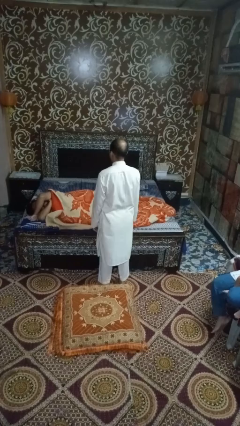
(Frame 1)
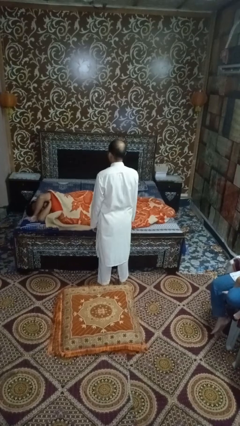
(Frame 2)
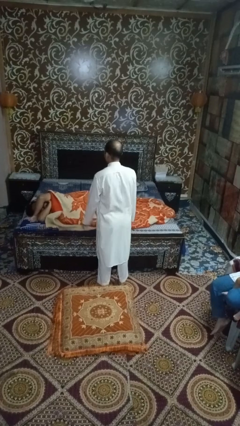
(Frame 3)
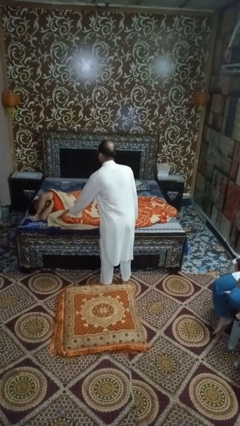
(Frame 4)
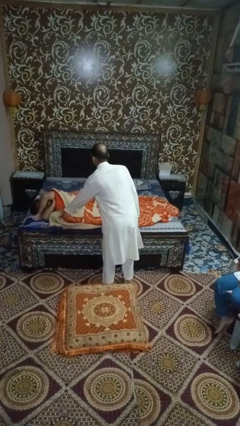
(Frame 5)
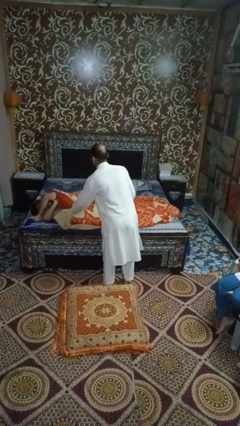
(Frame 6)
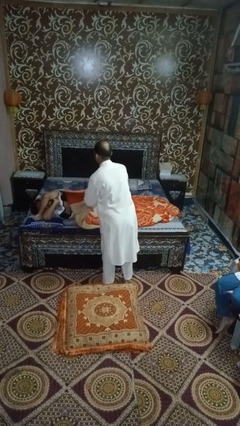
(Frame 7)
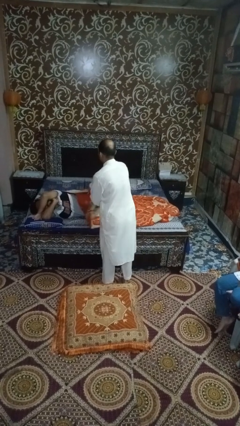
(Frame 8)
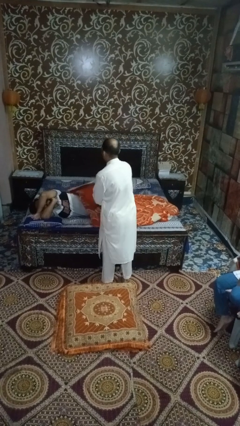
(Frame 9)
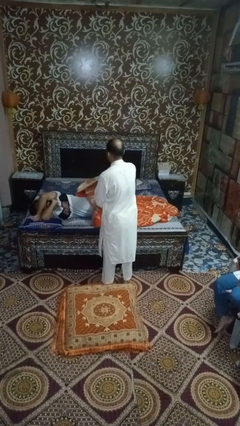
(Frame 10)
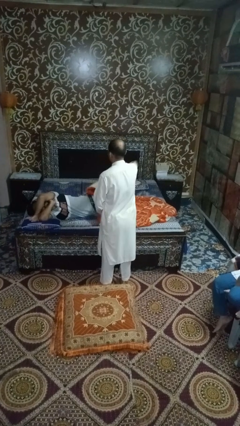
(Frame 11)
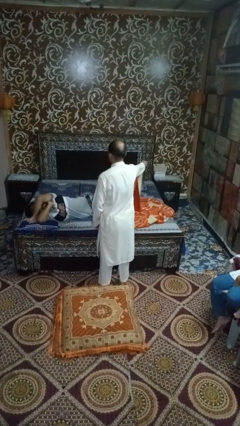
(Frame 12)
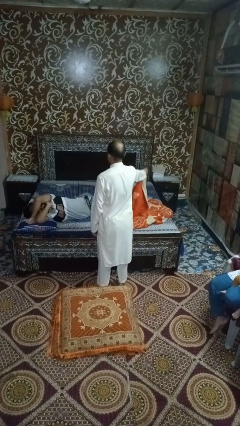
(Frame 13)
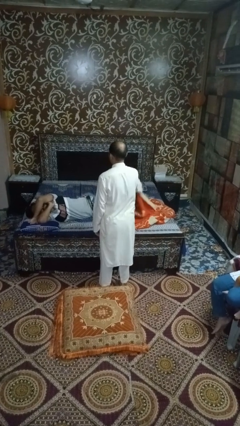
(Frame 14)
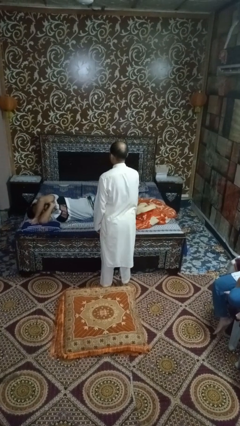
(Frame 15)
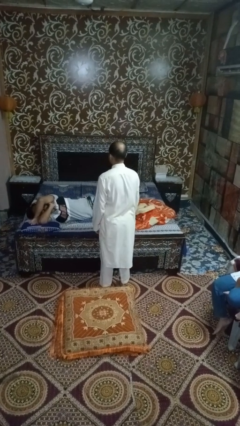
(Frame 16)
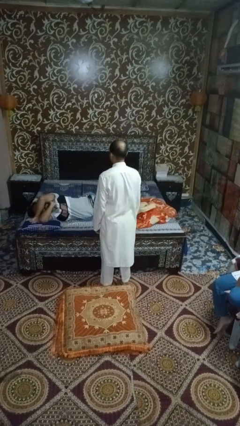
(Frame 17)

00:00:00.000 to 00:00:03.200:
person uncovers friend with blanket

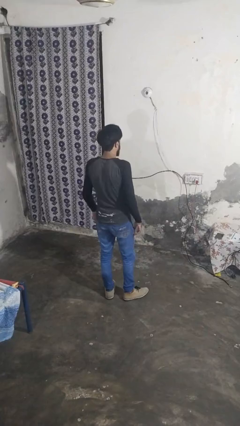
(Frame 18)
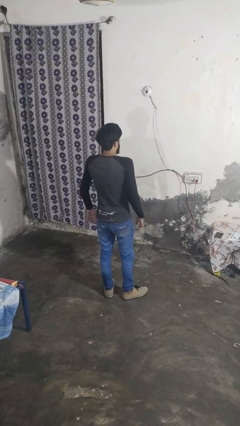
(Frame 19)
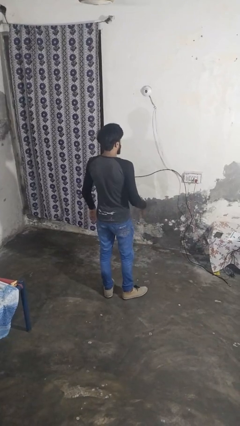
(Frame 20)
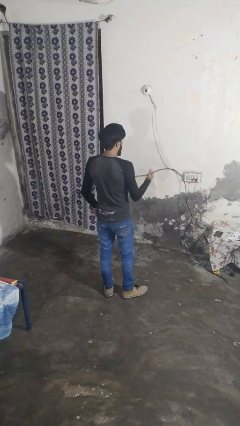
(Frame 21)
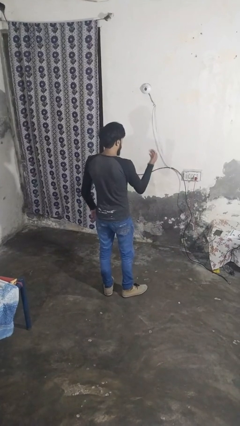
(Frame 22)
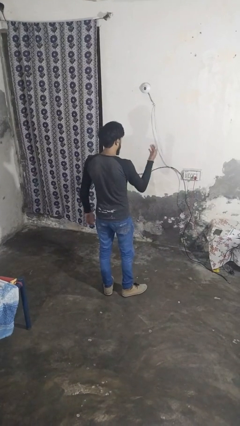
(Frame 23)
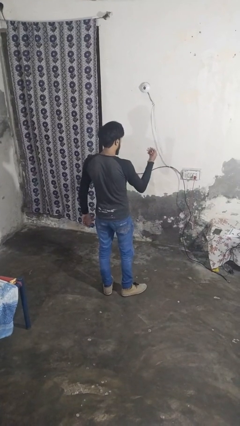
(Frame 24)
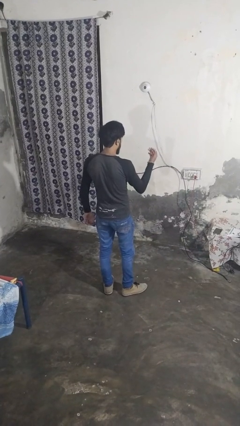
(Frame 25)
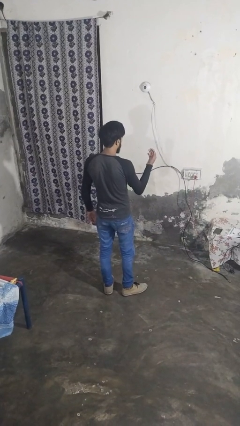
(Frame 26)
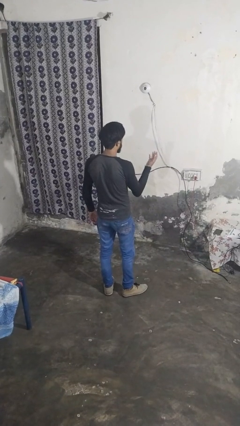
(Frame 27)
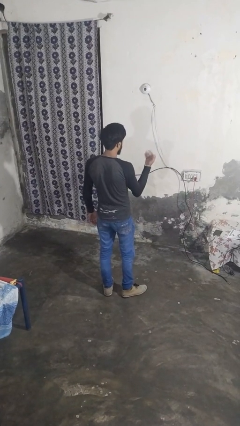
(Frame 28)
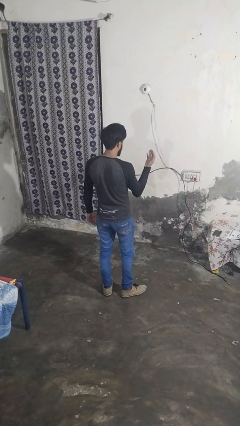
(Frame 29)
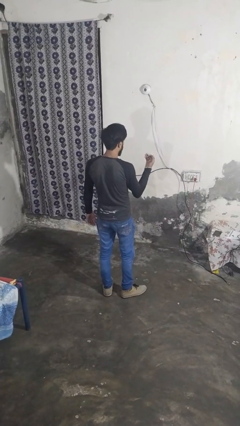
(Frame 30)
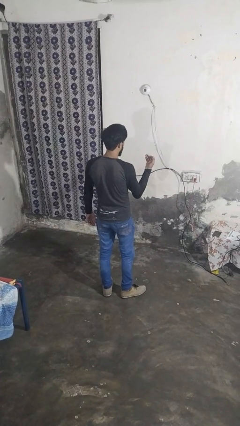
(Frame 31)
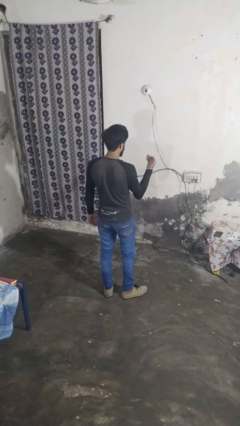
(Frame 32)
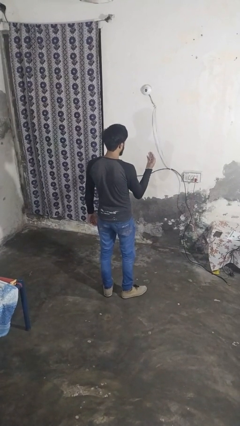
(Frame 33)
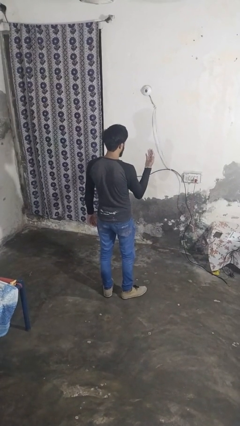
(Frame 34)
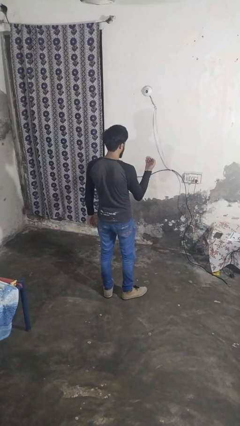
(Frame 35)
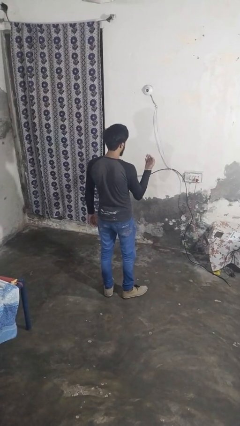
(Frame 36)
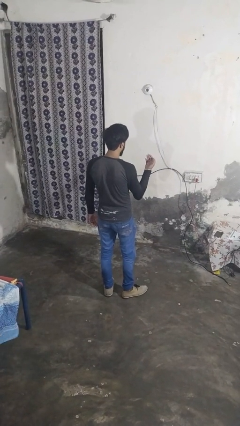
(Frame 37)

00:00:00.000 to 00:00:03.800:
person gestures come here

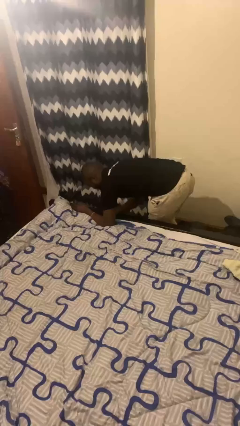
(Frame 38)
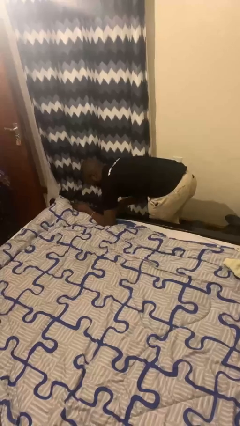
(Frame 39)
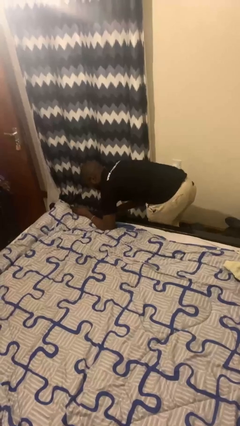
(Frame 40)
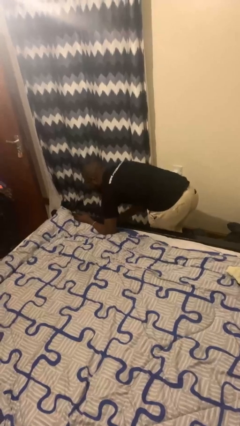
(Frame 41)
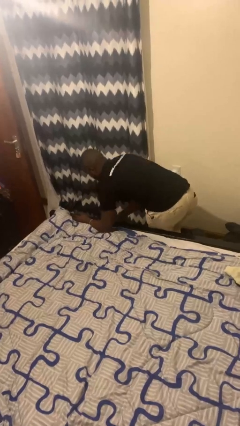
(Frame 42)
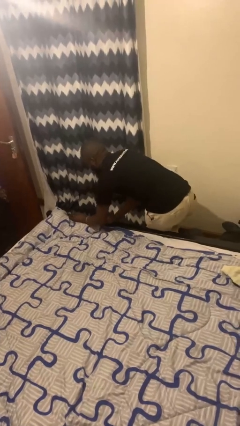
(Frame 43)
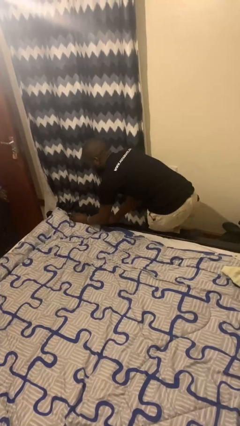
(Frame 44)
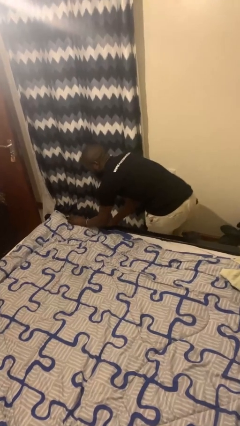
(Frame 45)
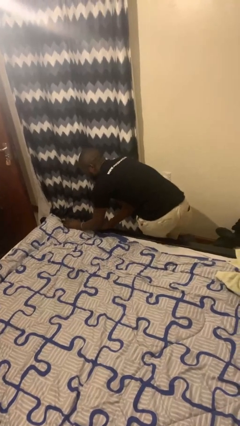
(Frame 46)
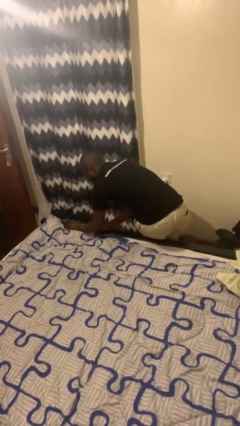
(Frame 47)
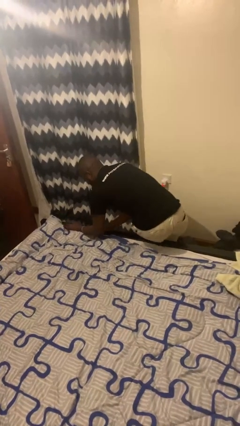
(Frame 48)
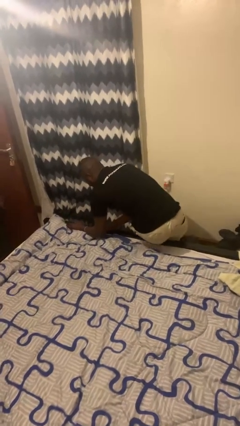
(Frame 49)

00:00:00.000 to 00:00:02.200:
person stands up from floor

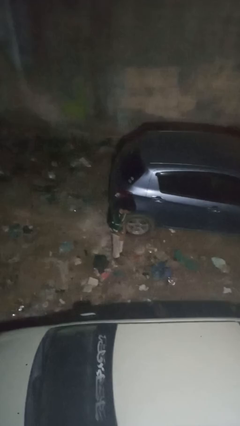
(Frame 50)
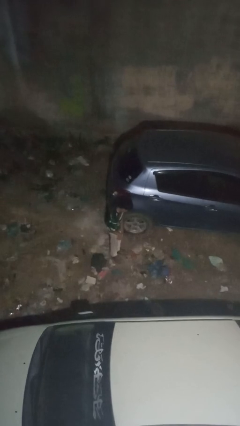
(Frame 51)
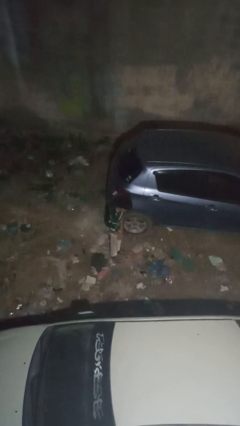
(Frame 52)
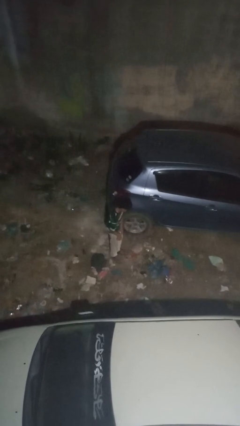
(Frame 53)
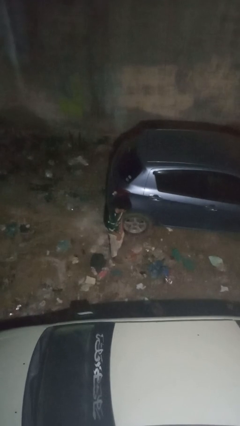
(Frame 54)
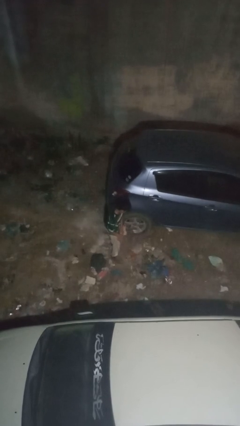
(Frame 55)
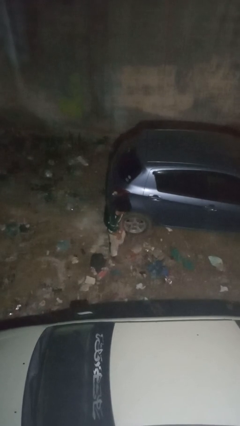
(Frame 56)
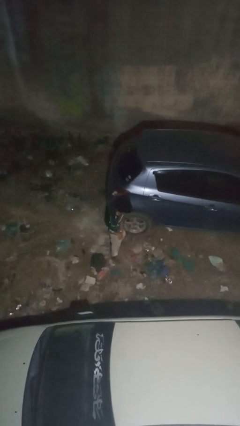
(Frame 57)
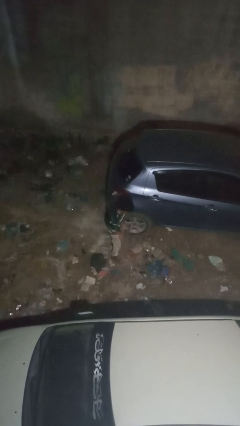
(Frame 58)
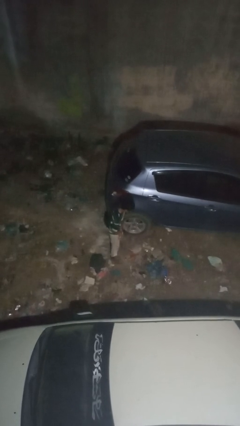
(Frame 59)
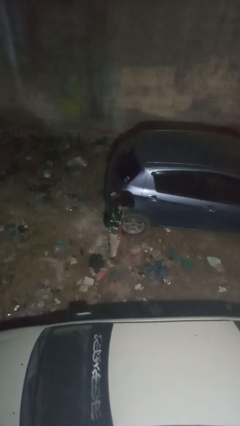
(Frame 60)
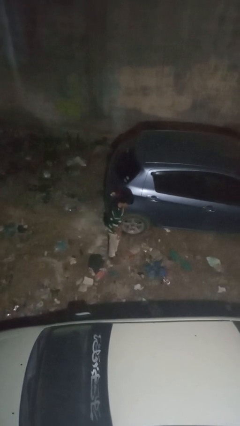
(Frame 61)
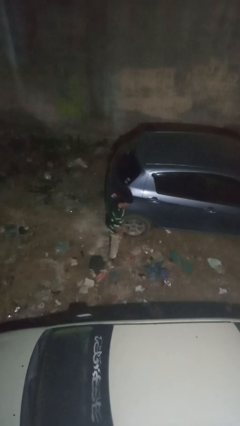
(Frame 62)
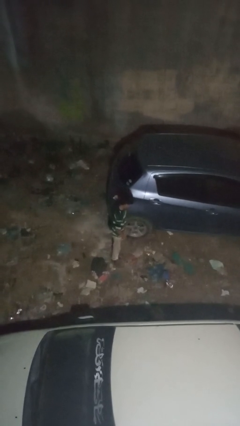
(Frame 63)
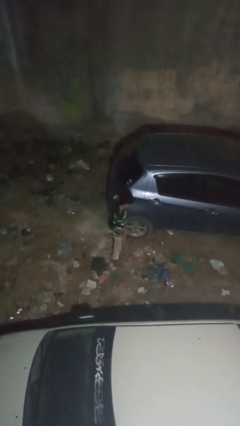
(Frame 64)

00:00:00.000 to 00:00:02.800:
person kicks car tires

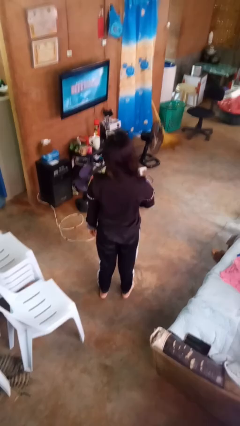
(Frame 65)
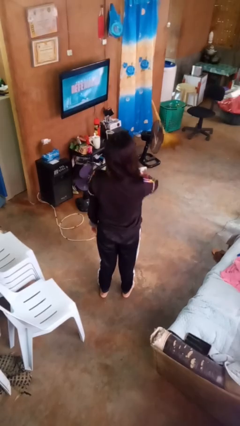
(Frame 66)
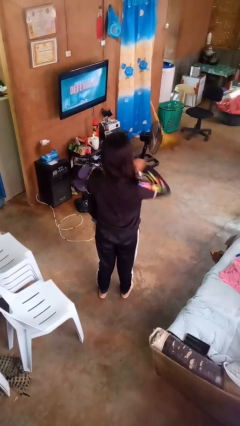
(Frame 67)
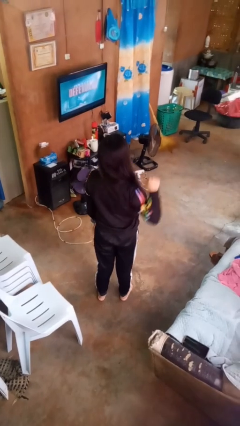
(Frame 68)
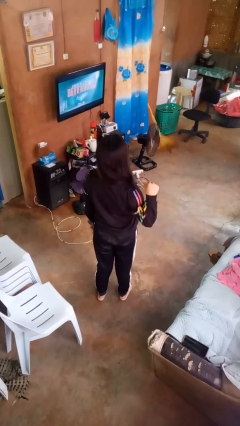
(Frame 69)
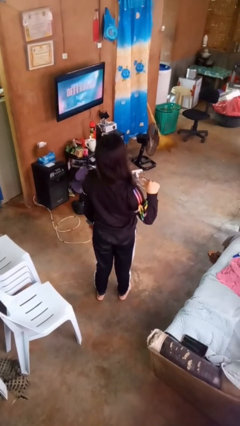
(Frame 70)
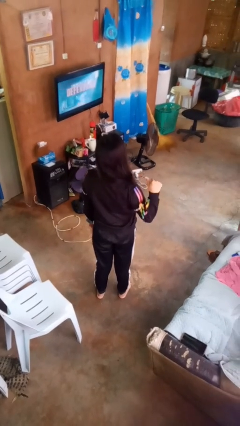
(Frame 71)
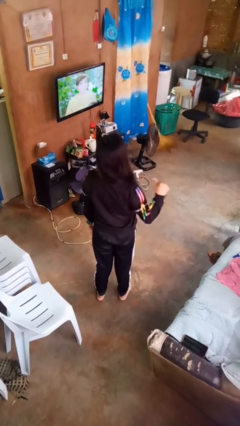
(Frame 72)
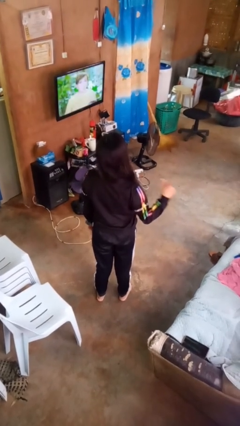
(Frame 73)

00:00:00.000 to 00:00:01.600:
person gestures cut

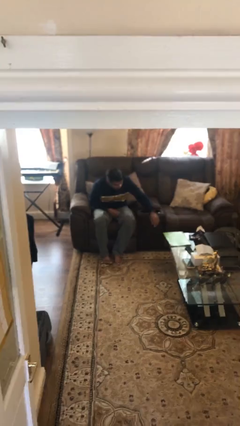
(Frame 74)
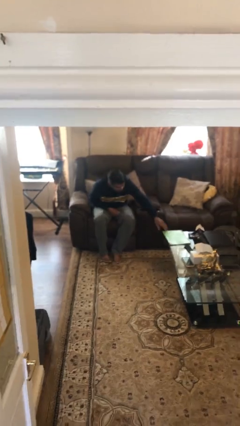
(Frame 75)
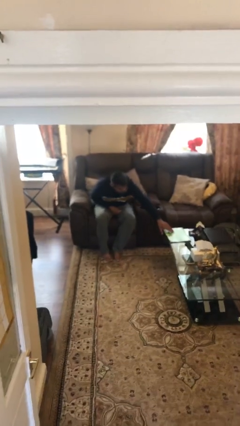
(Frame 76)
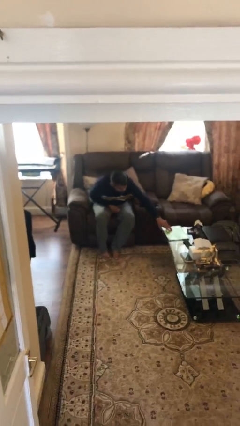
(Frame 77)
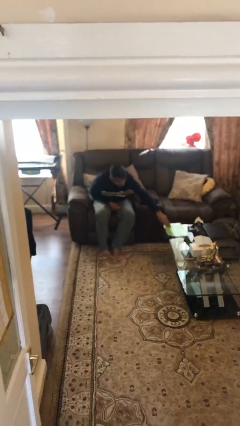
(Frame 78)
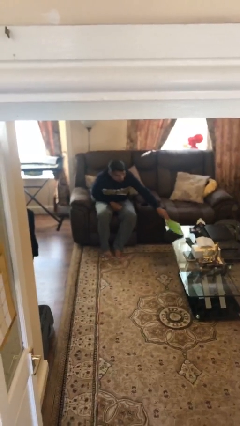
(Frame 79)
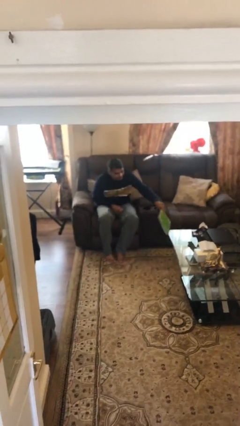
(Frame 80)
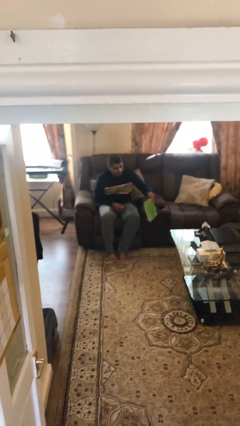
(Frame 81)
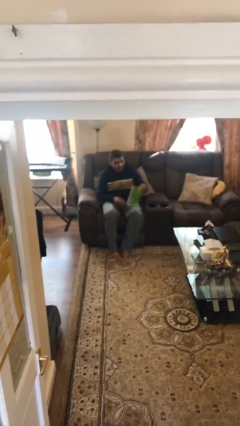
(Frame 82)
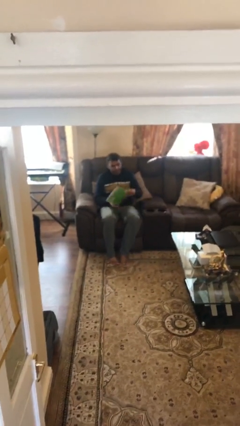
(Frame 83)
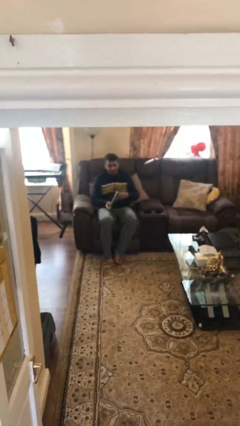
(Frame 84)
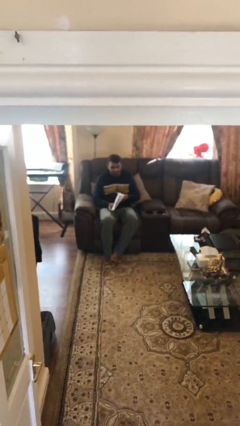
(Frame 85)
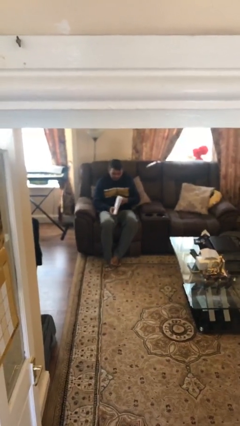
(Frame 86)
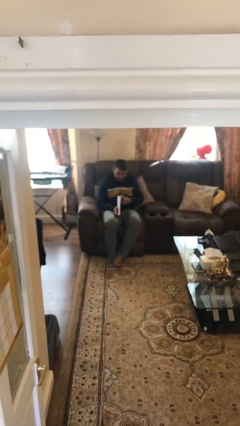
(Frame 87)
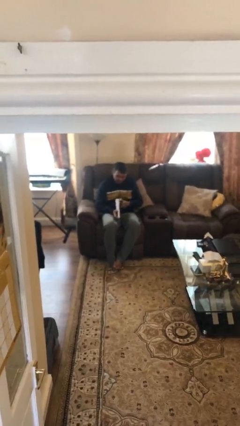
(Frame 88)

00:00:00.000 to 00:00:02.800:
person picks up object from table

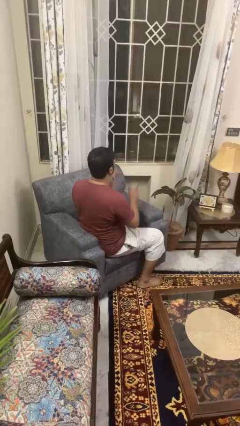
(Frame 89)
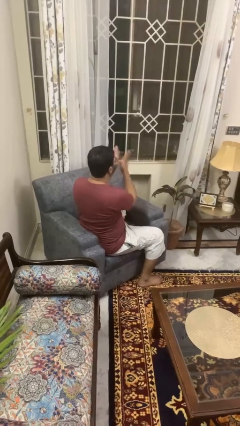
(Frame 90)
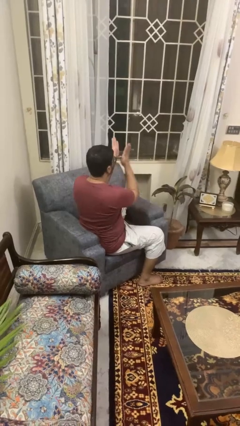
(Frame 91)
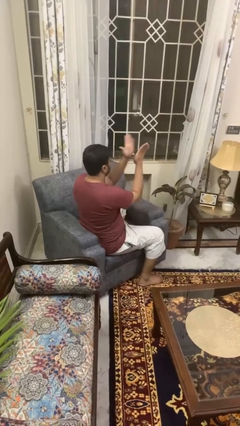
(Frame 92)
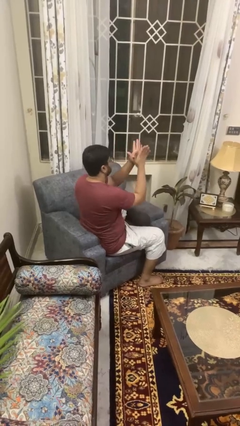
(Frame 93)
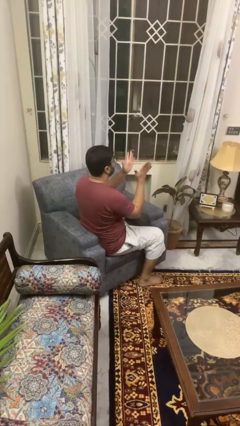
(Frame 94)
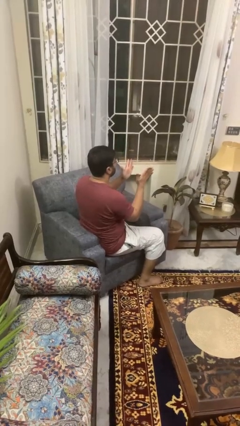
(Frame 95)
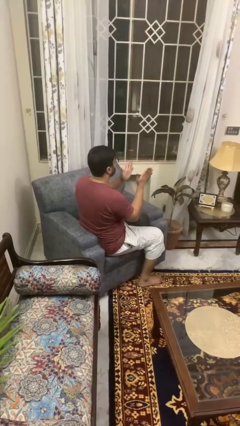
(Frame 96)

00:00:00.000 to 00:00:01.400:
person swats bug
